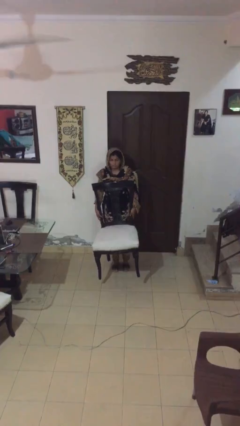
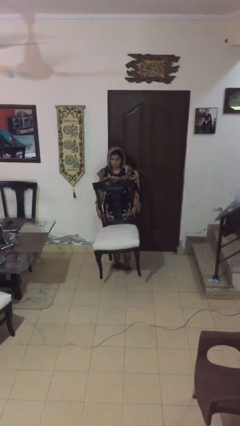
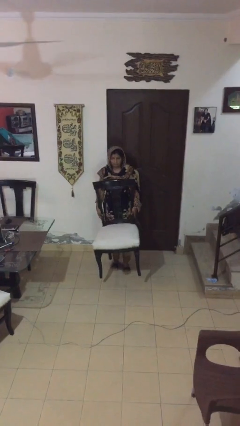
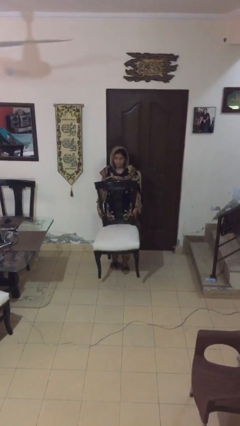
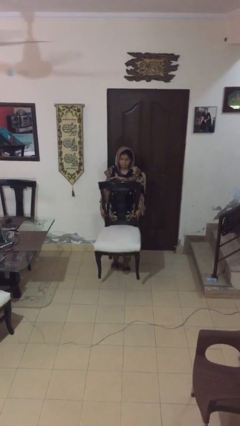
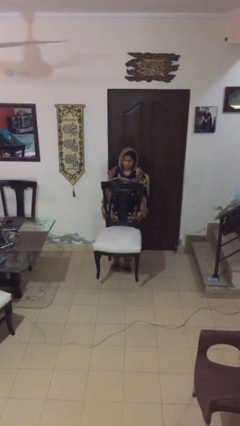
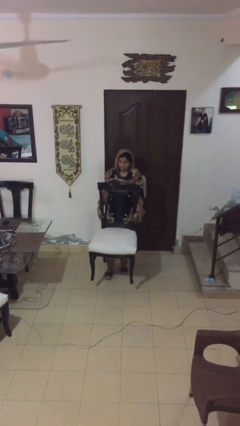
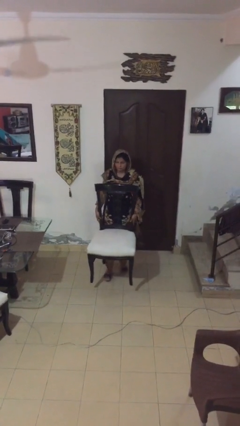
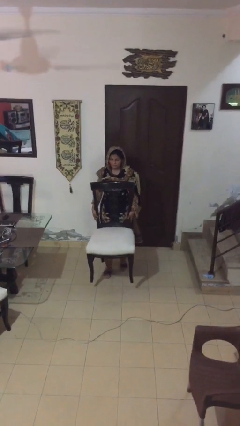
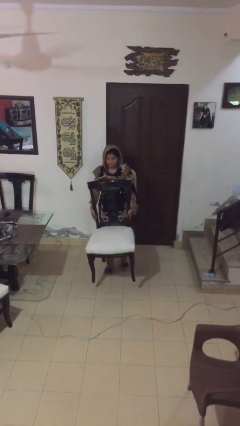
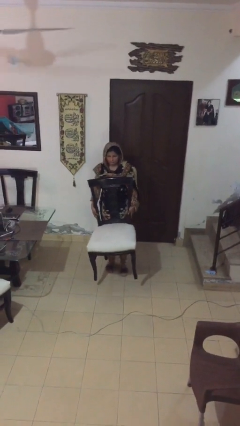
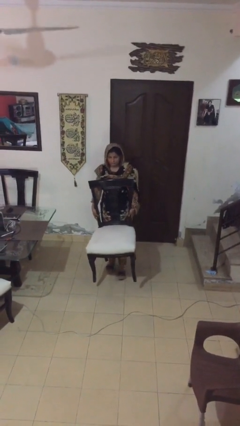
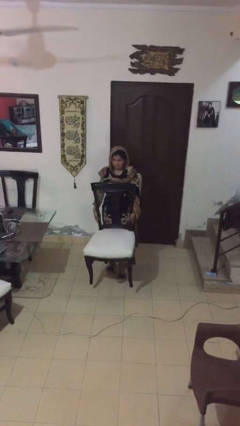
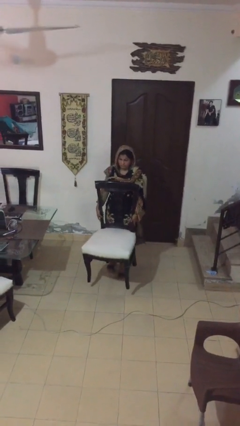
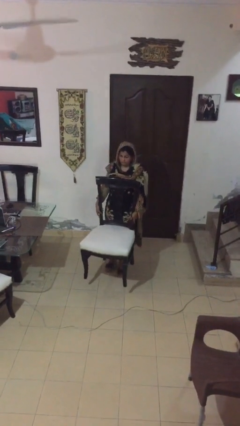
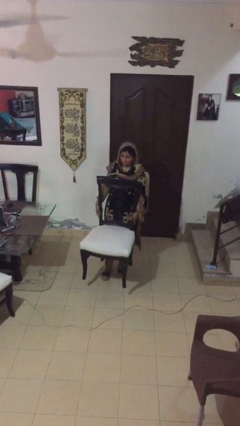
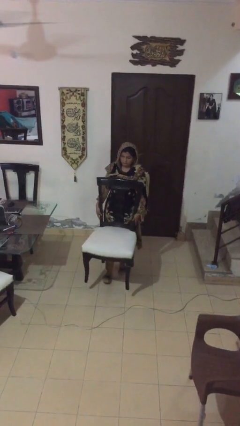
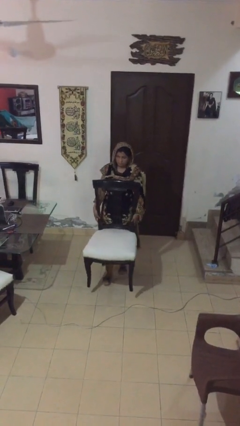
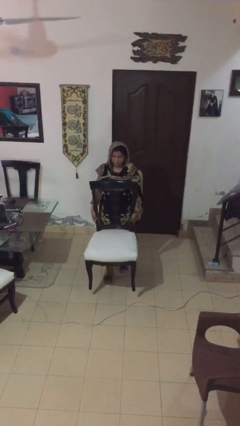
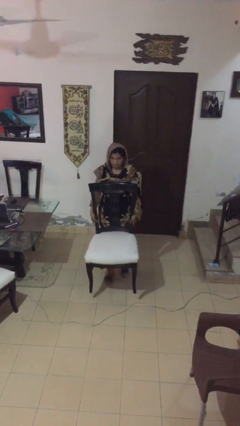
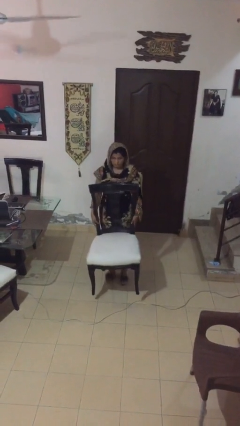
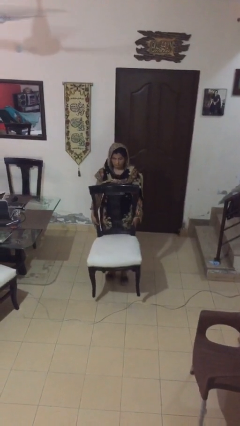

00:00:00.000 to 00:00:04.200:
person carries heavy object

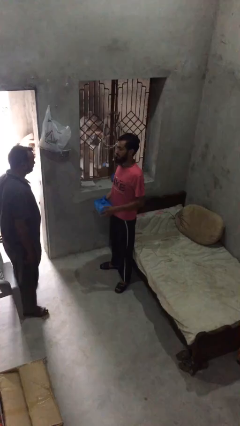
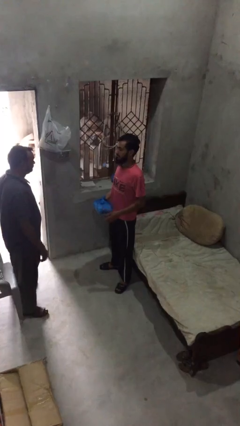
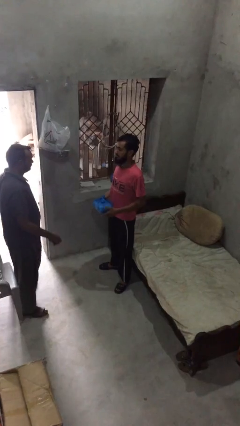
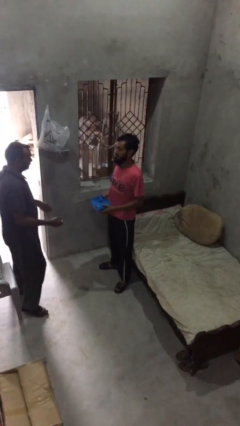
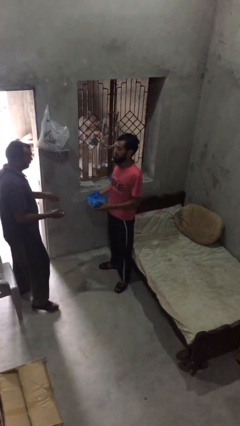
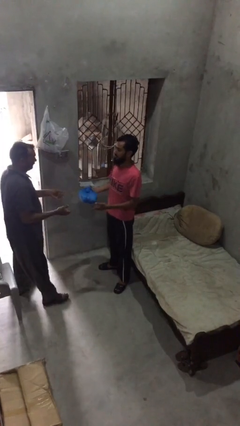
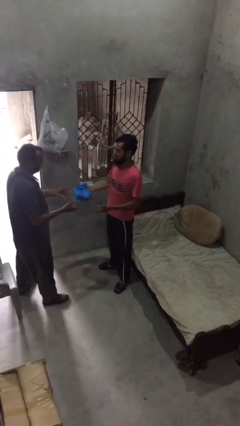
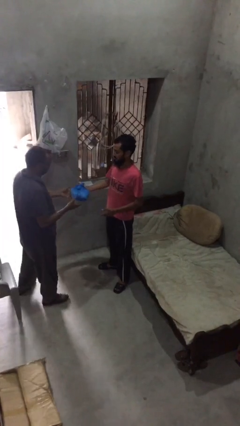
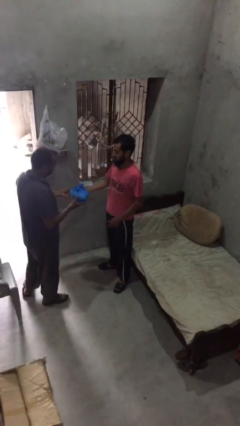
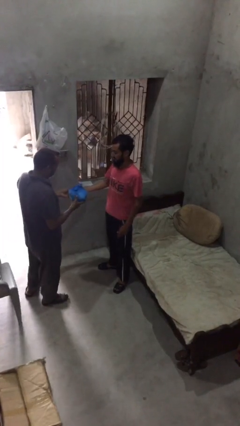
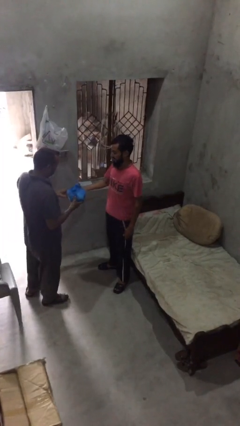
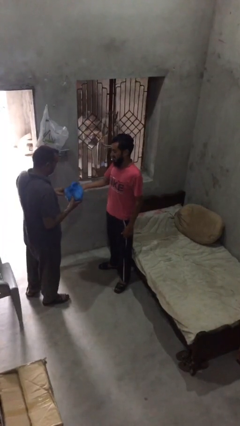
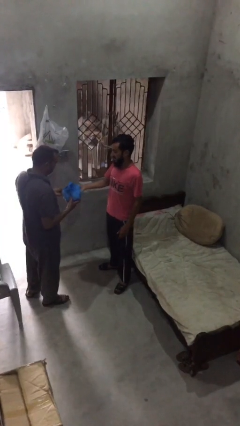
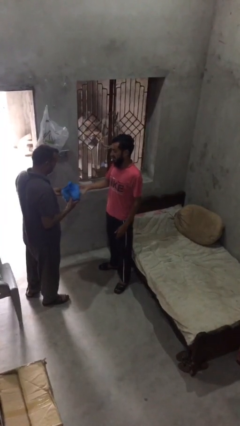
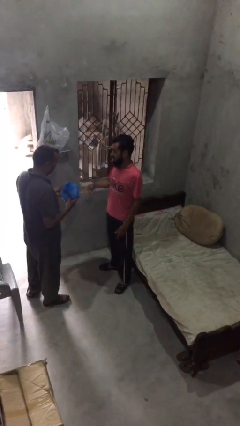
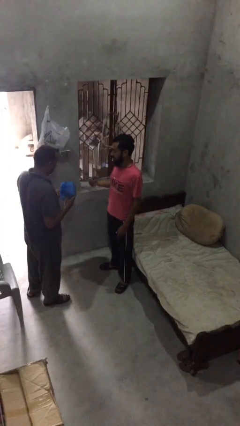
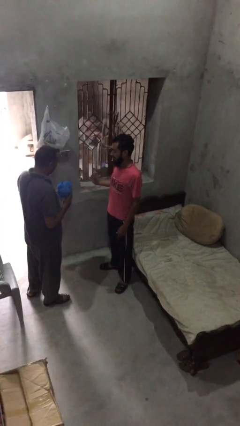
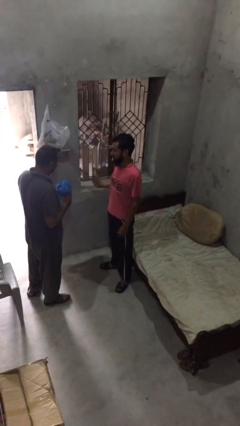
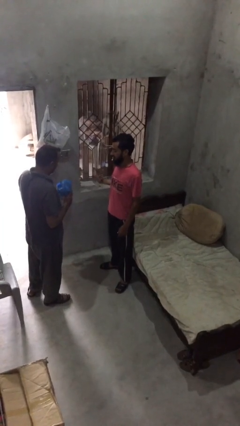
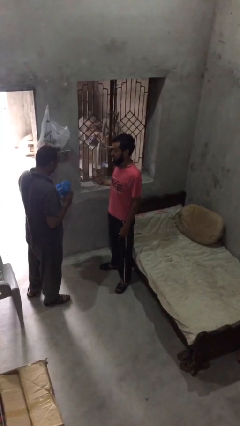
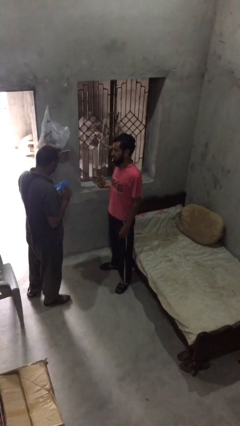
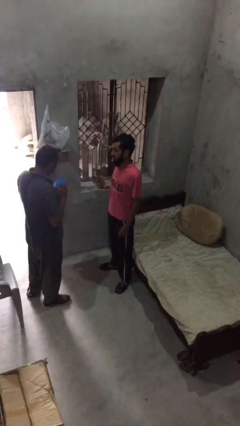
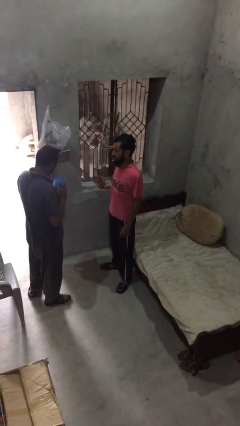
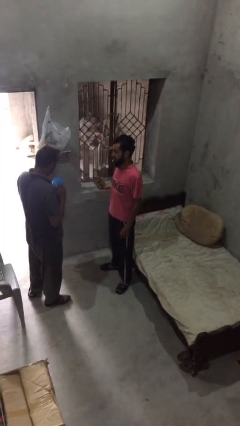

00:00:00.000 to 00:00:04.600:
person transfers object to person

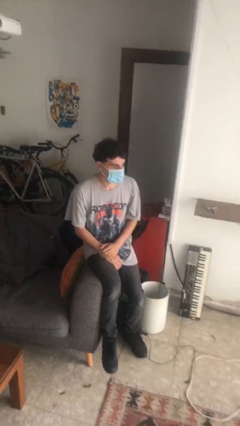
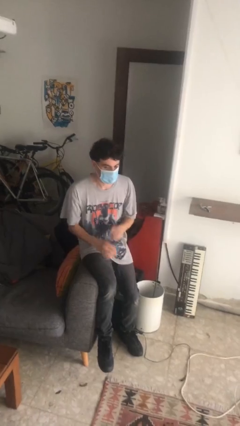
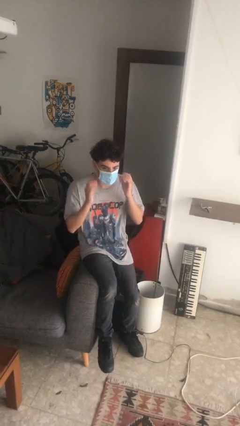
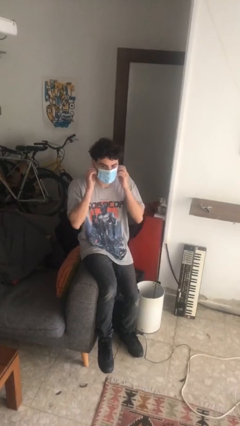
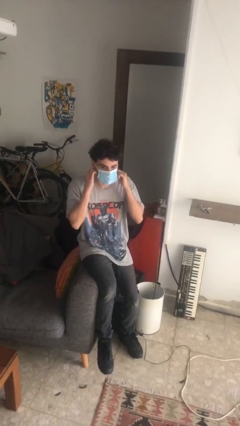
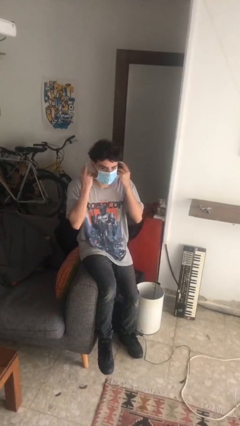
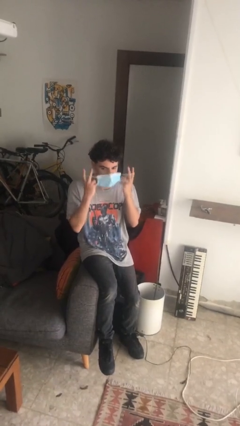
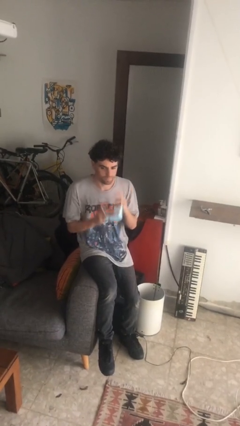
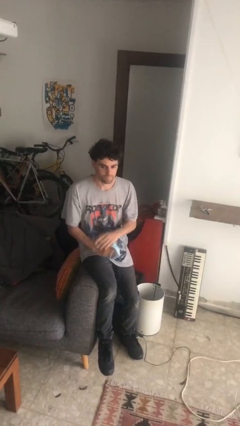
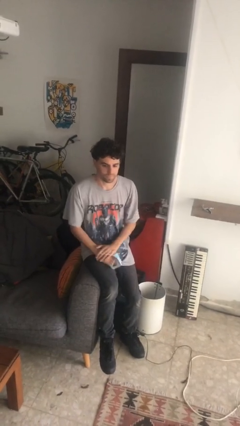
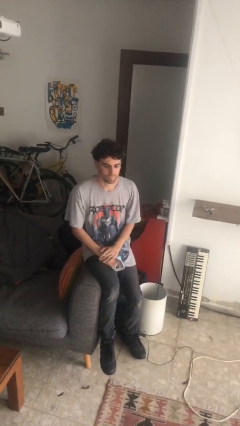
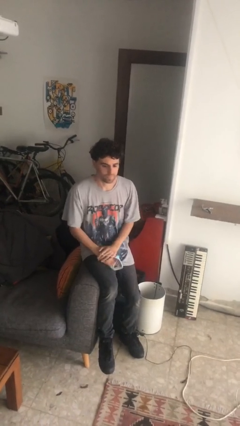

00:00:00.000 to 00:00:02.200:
person takes off facemask

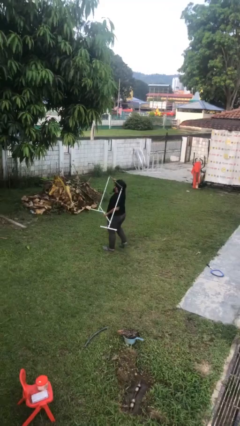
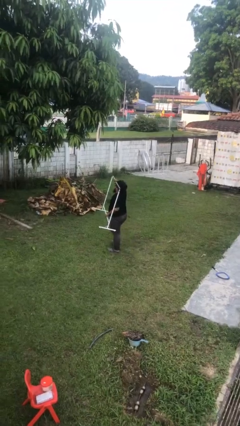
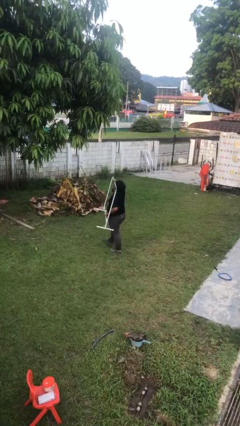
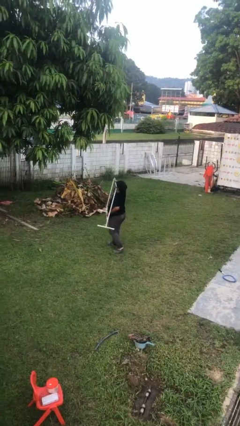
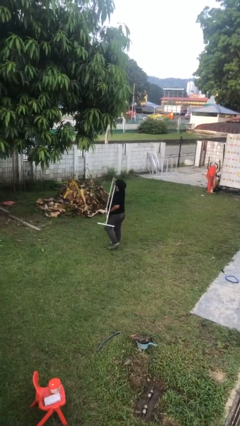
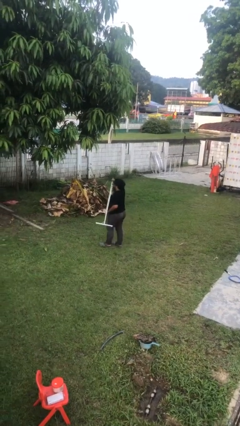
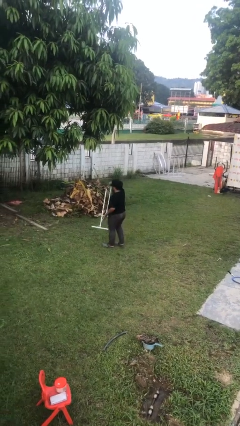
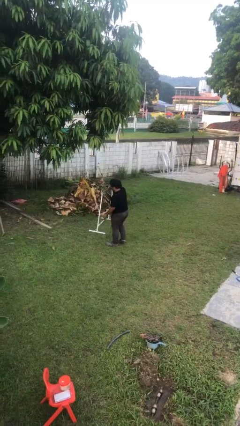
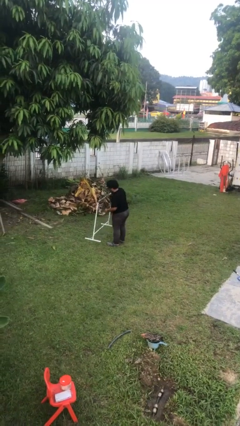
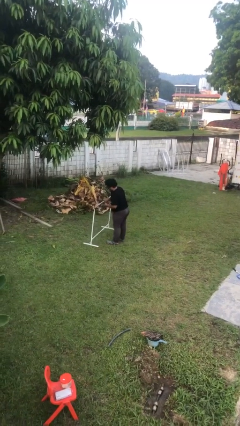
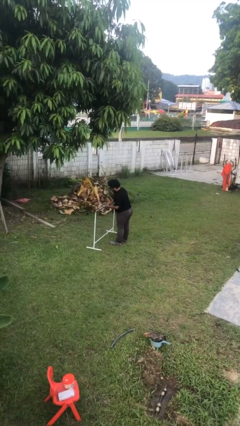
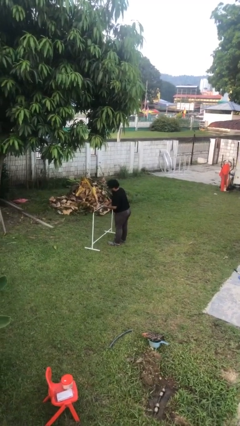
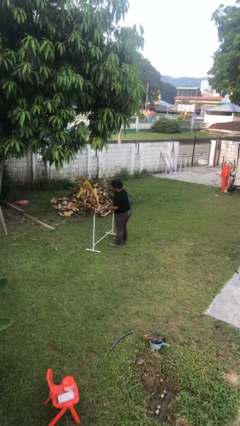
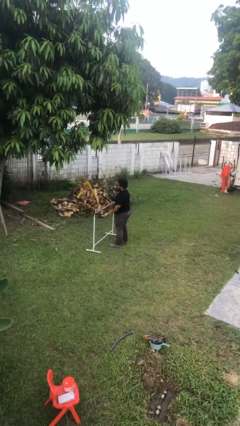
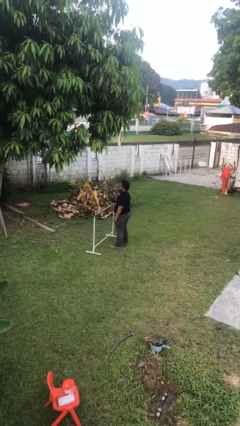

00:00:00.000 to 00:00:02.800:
person puts down object on floor

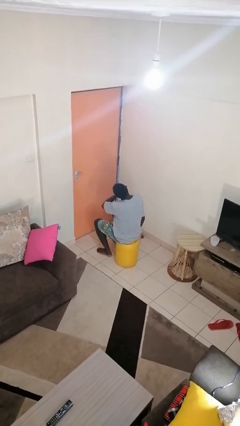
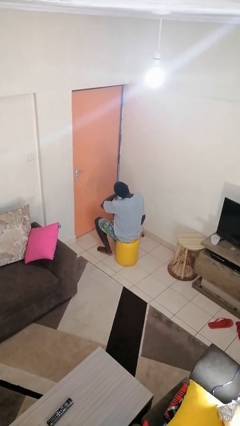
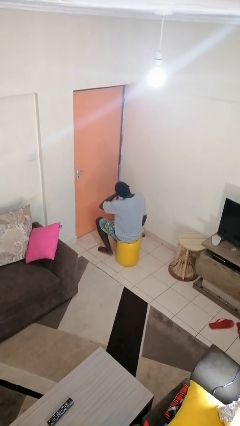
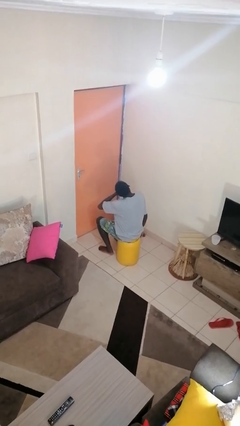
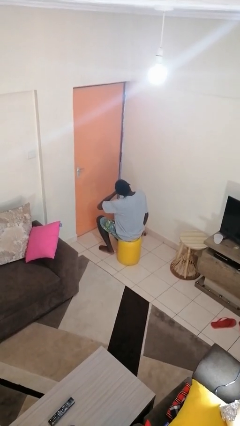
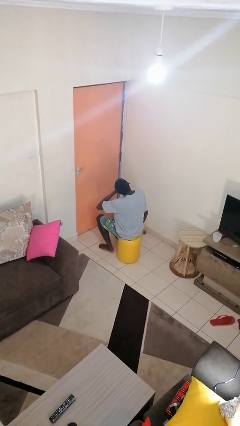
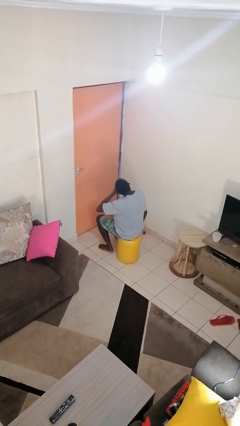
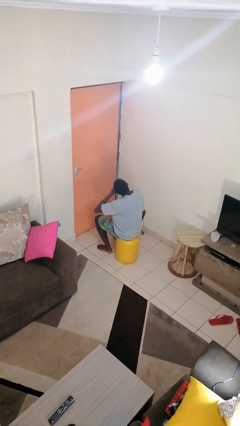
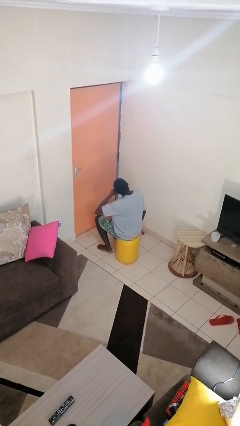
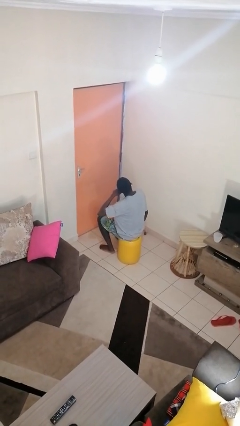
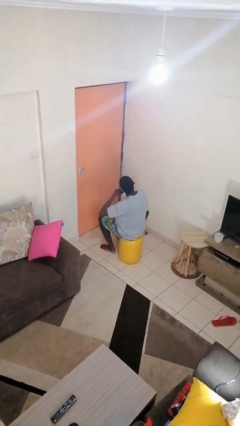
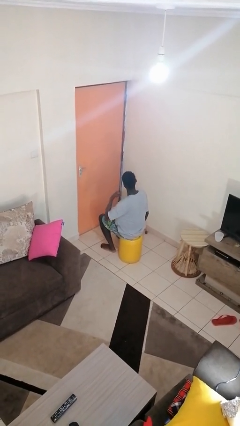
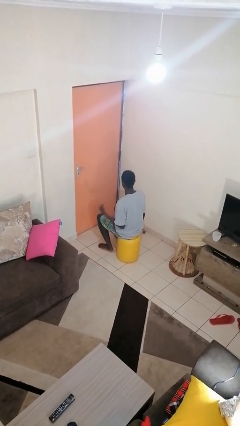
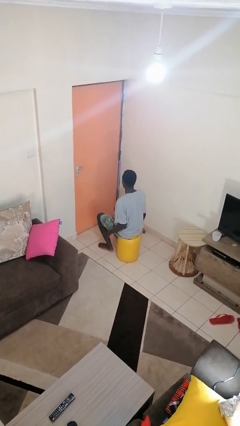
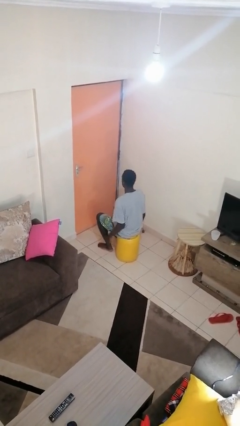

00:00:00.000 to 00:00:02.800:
person gestures cut

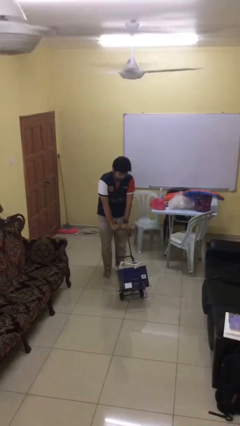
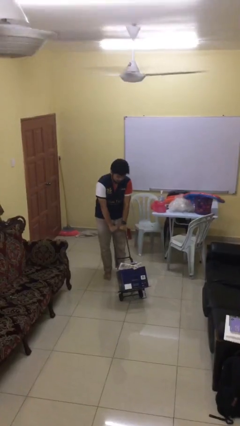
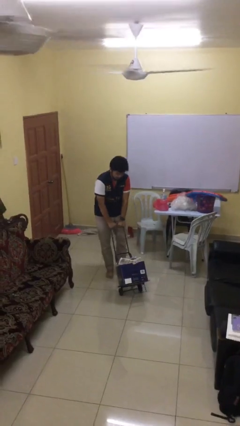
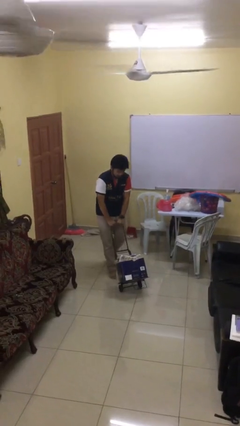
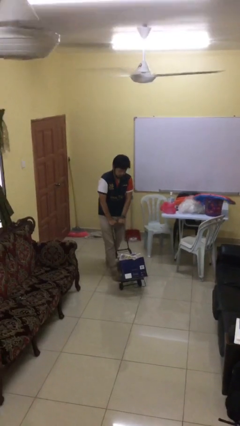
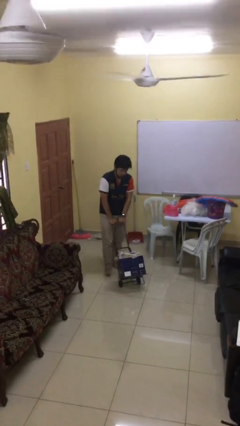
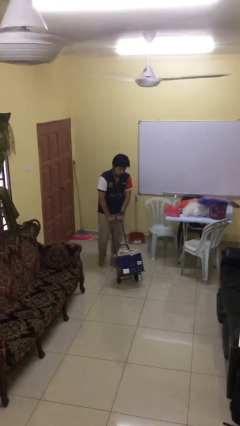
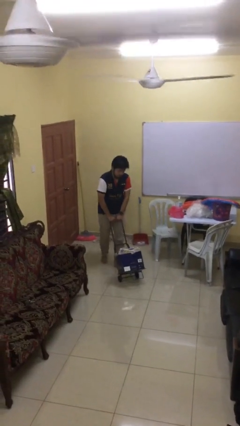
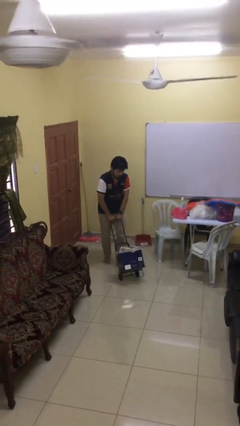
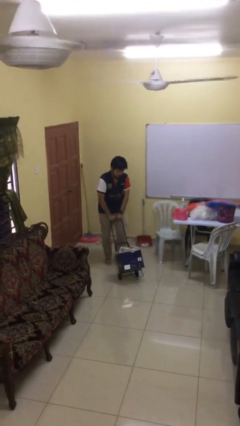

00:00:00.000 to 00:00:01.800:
person pulls wheeled cart
